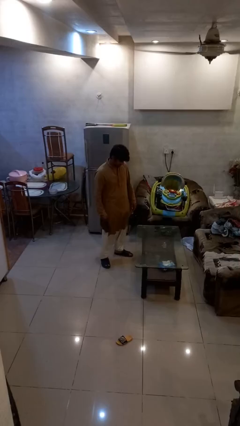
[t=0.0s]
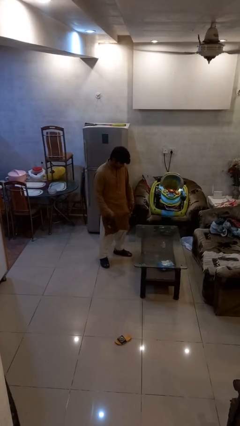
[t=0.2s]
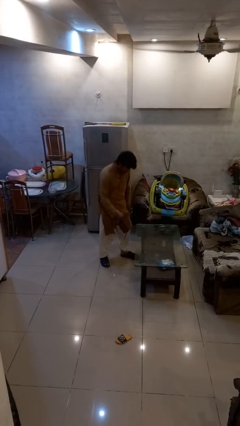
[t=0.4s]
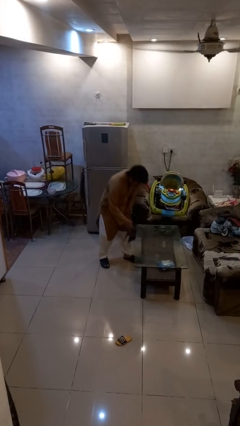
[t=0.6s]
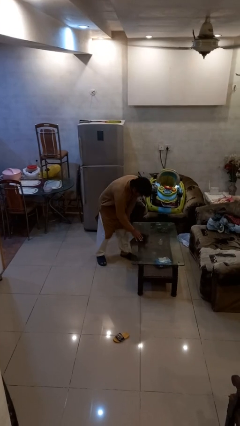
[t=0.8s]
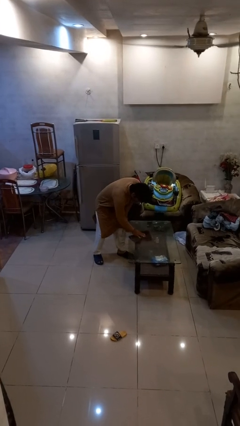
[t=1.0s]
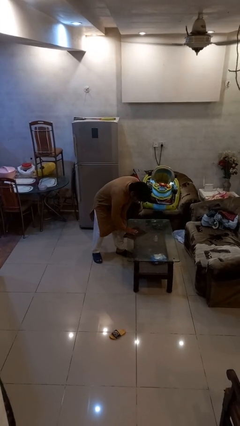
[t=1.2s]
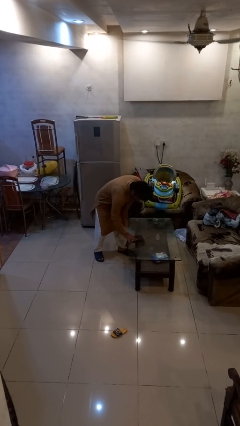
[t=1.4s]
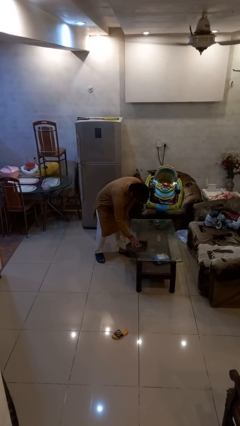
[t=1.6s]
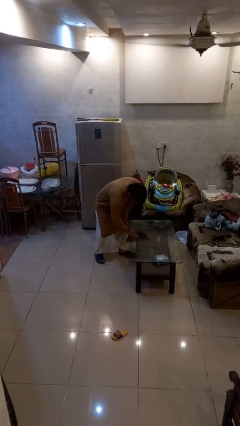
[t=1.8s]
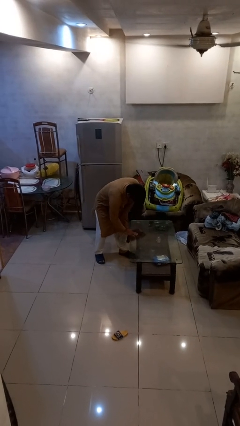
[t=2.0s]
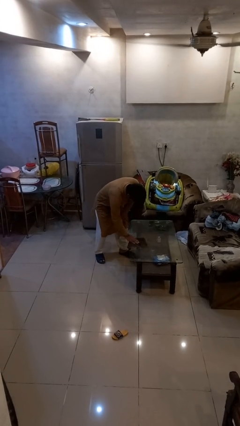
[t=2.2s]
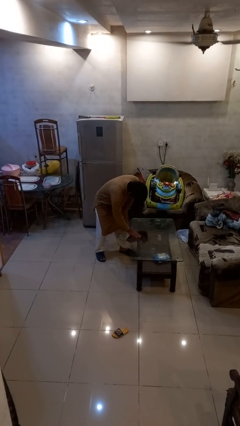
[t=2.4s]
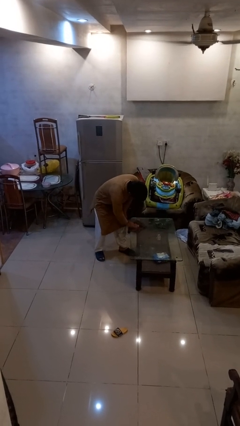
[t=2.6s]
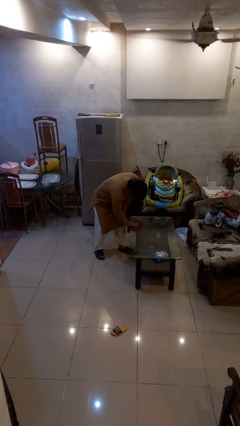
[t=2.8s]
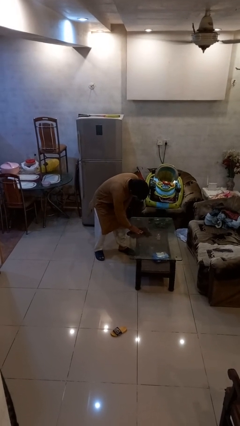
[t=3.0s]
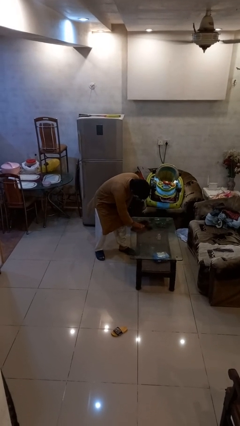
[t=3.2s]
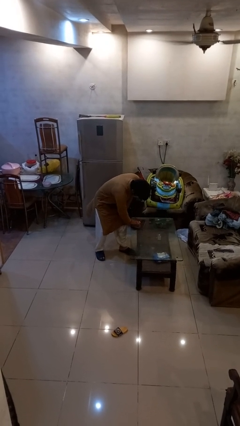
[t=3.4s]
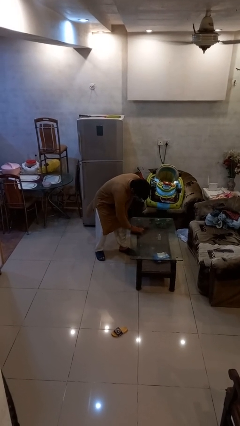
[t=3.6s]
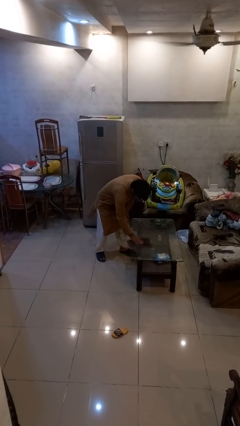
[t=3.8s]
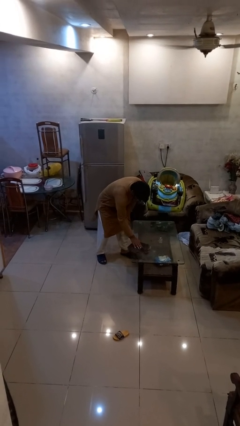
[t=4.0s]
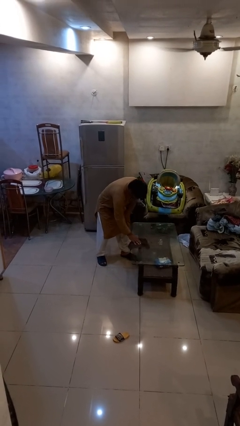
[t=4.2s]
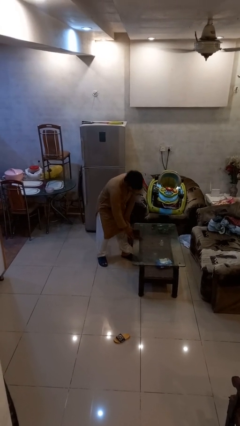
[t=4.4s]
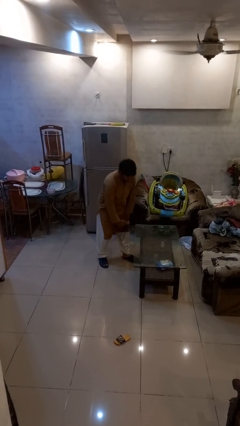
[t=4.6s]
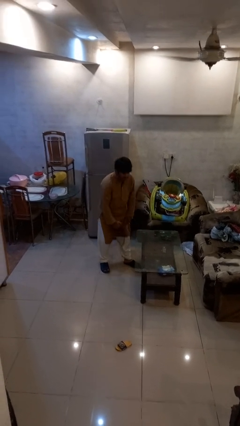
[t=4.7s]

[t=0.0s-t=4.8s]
person cleans table with rag

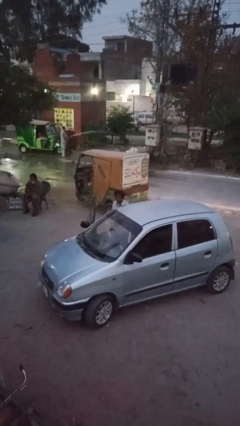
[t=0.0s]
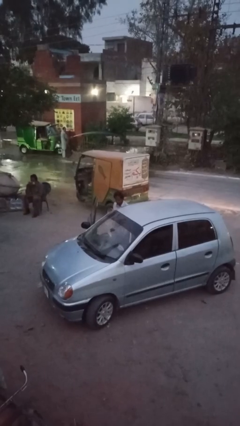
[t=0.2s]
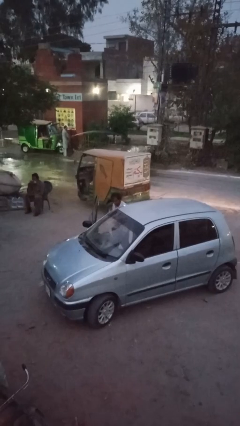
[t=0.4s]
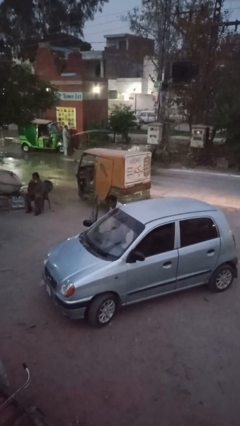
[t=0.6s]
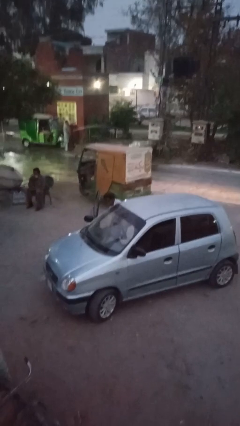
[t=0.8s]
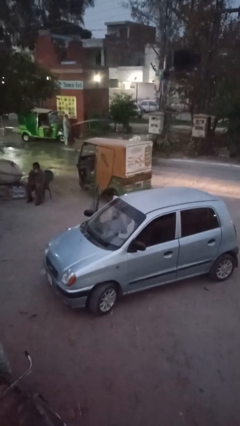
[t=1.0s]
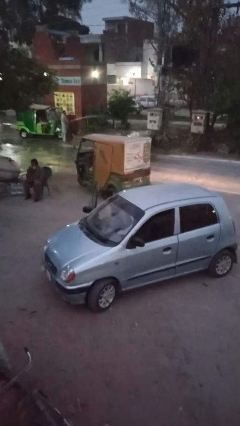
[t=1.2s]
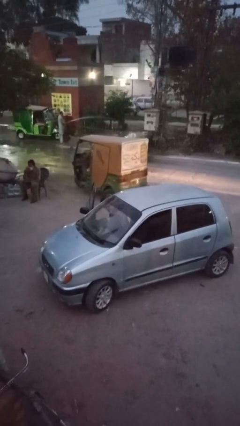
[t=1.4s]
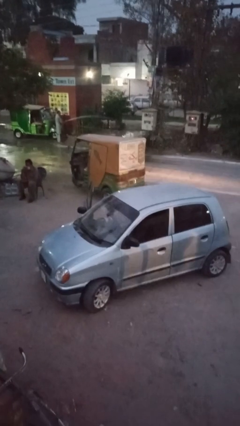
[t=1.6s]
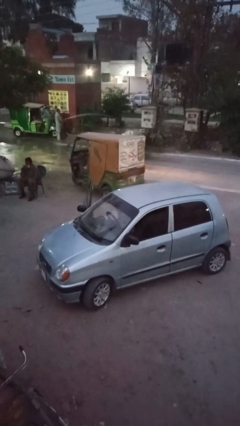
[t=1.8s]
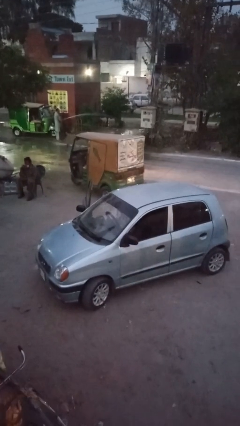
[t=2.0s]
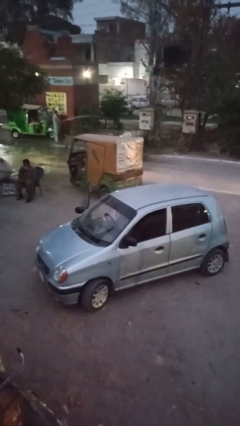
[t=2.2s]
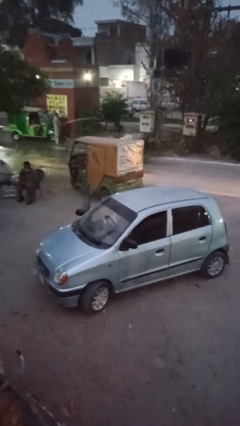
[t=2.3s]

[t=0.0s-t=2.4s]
person enters car

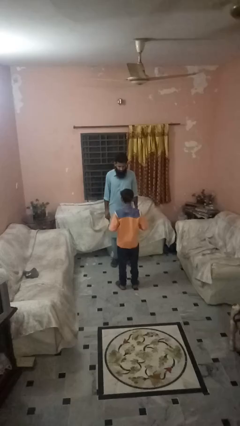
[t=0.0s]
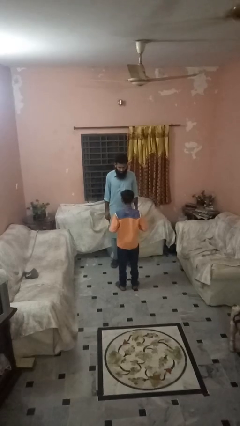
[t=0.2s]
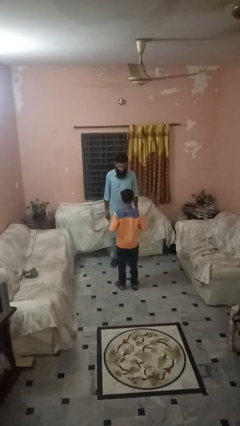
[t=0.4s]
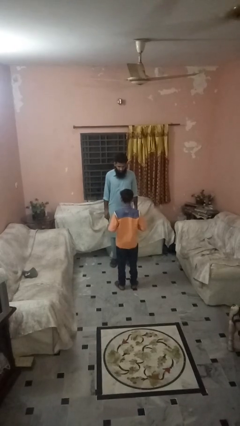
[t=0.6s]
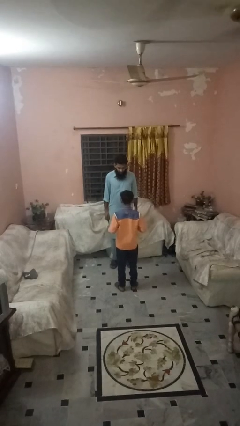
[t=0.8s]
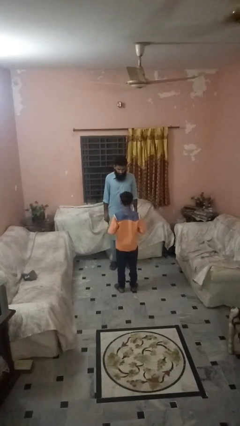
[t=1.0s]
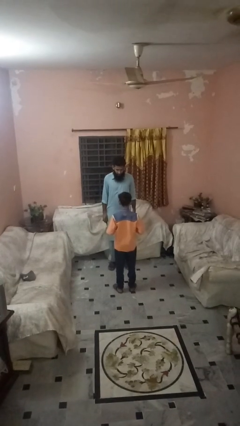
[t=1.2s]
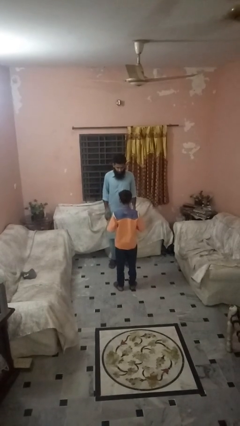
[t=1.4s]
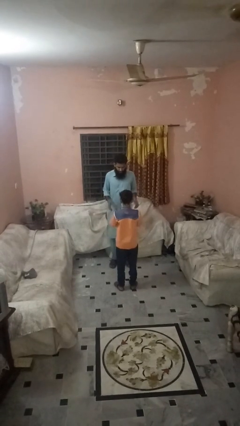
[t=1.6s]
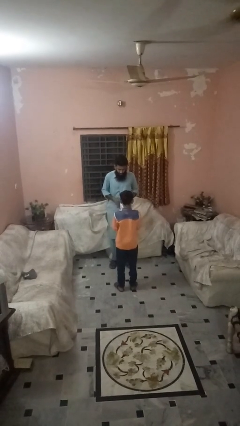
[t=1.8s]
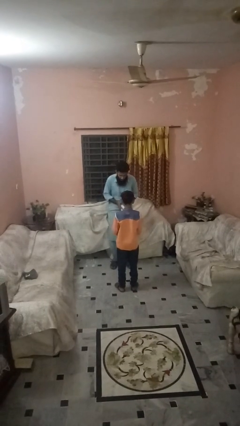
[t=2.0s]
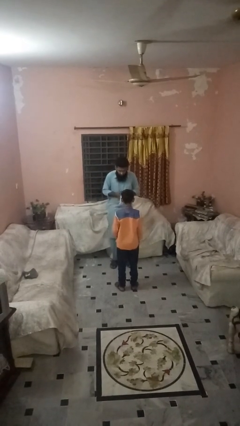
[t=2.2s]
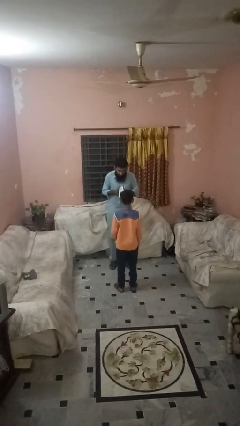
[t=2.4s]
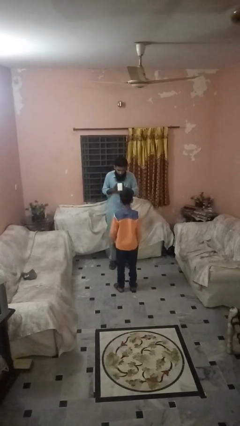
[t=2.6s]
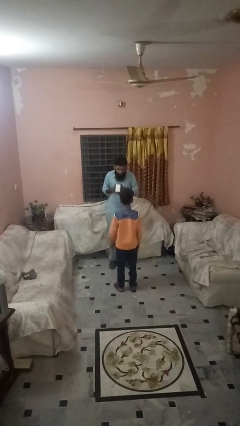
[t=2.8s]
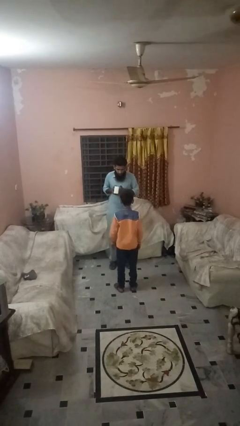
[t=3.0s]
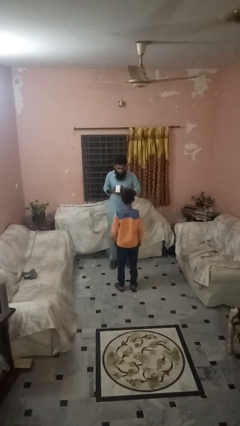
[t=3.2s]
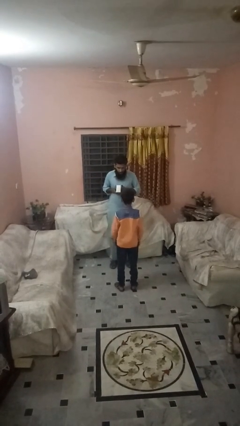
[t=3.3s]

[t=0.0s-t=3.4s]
person catches object from person

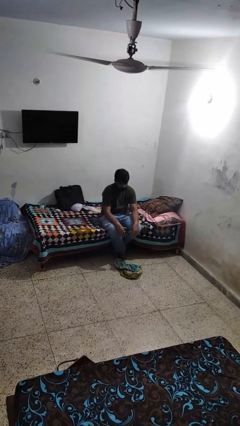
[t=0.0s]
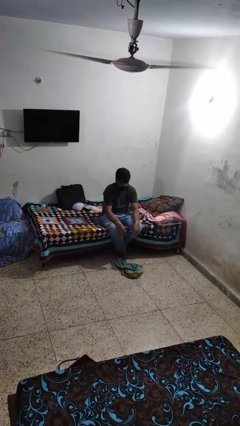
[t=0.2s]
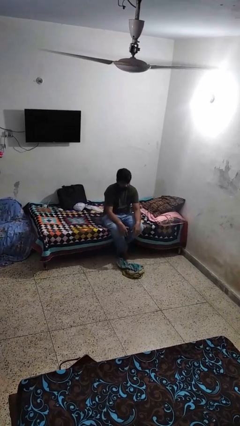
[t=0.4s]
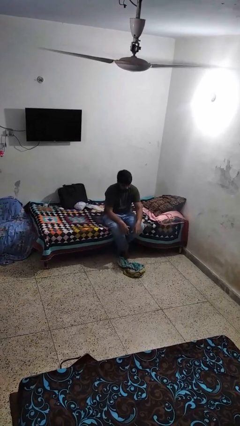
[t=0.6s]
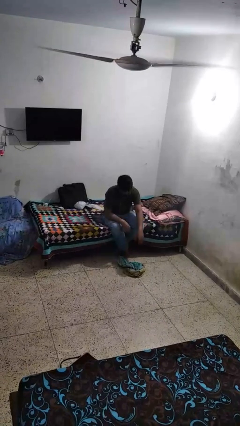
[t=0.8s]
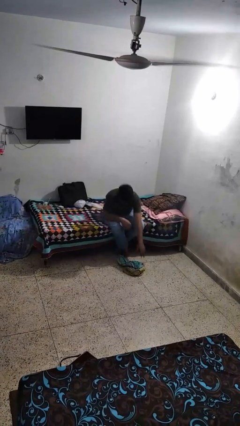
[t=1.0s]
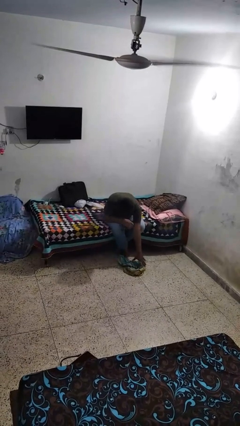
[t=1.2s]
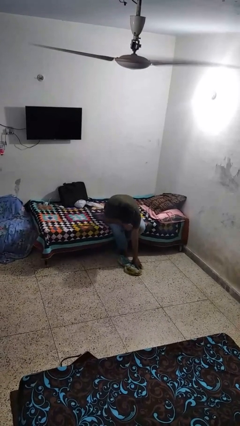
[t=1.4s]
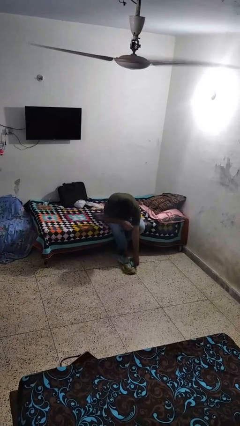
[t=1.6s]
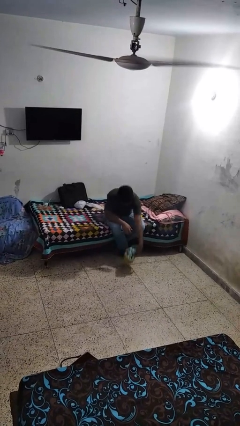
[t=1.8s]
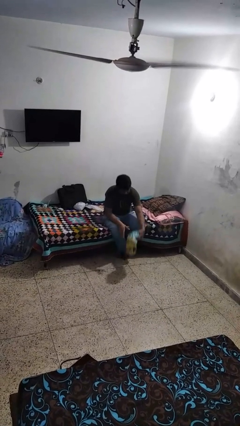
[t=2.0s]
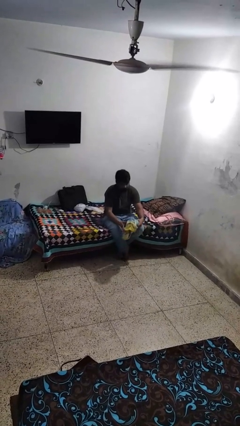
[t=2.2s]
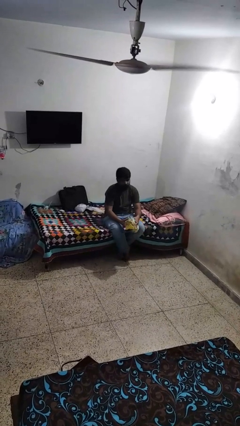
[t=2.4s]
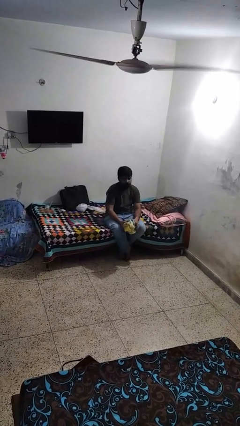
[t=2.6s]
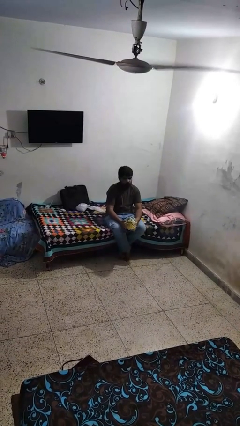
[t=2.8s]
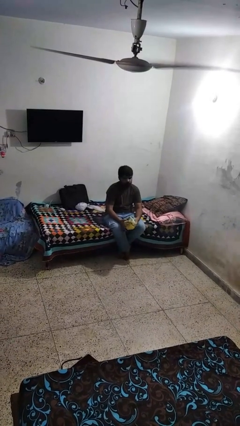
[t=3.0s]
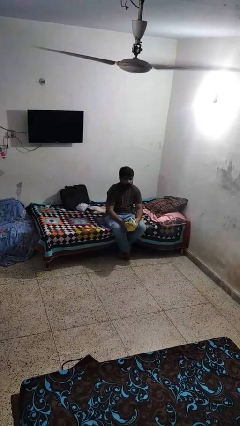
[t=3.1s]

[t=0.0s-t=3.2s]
person picks up object from floor

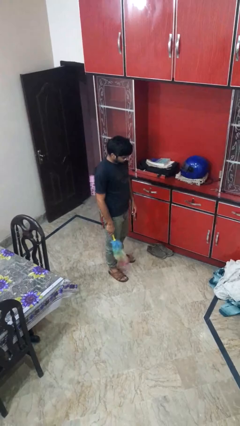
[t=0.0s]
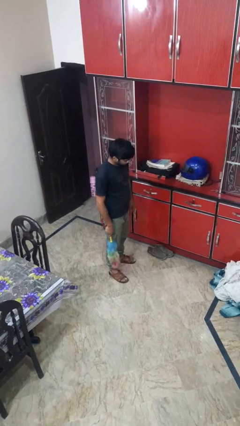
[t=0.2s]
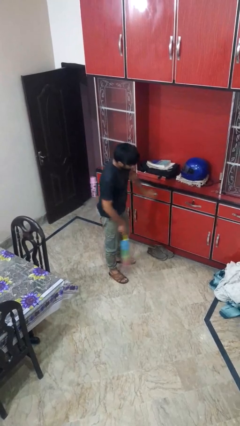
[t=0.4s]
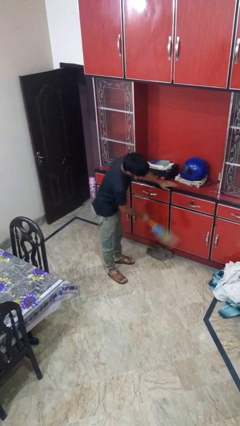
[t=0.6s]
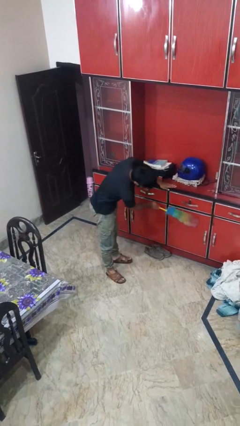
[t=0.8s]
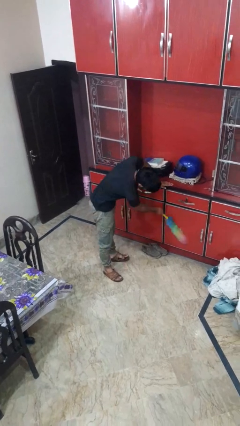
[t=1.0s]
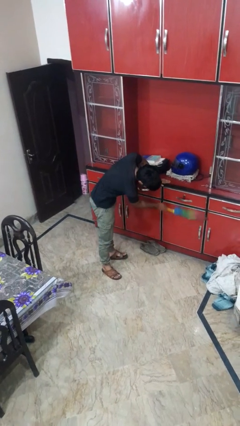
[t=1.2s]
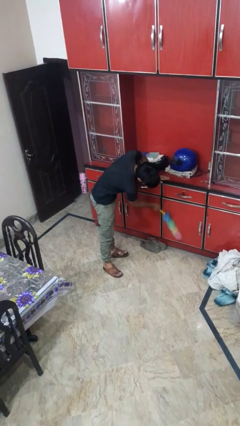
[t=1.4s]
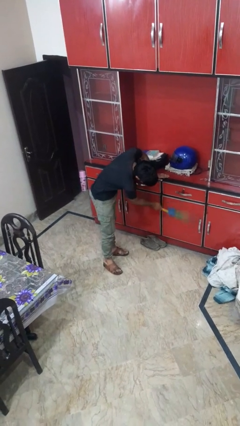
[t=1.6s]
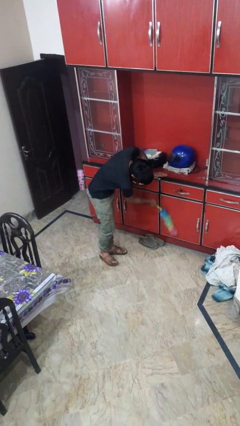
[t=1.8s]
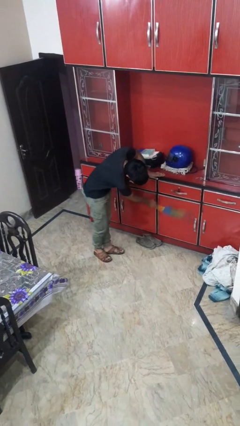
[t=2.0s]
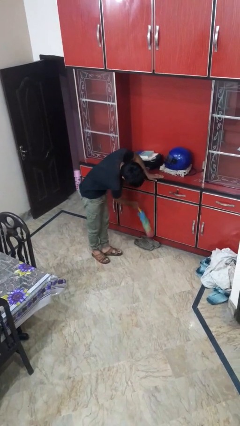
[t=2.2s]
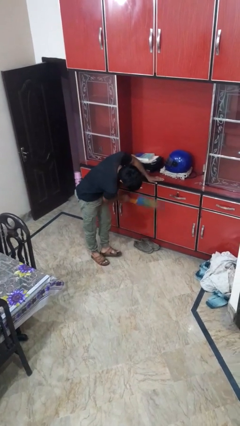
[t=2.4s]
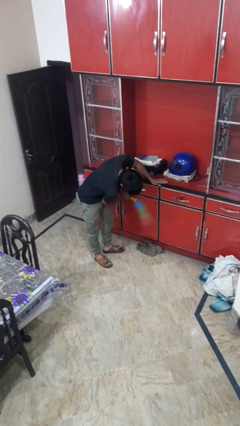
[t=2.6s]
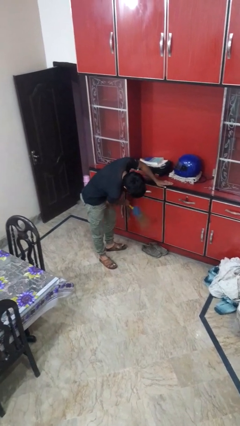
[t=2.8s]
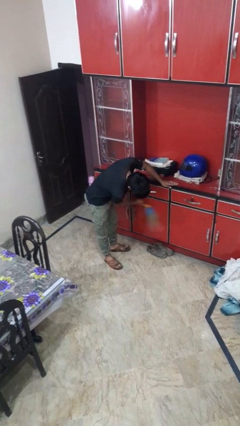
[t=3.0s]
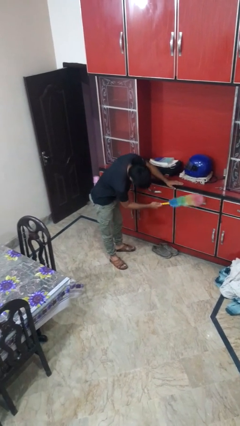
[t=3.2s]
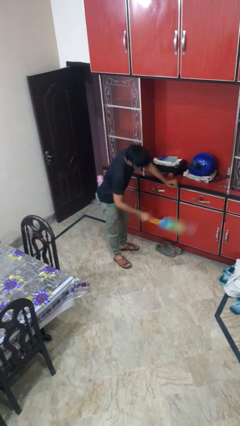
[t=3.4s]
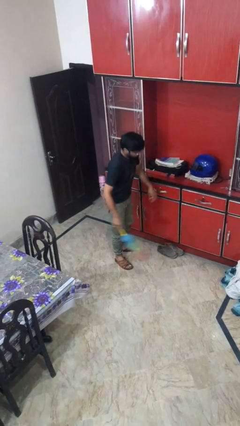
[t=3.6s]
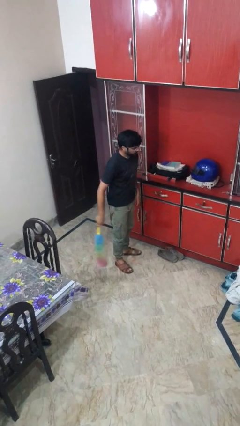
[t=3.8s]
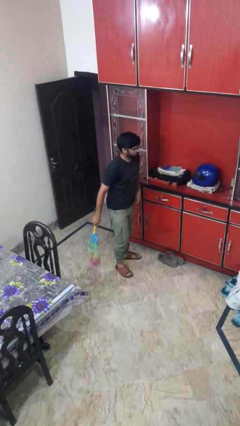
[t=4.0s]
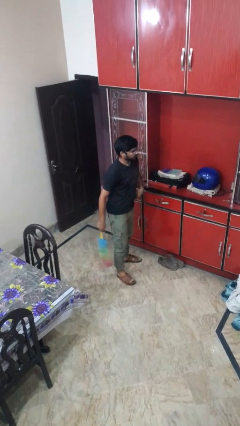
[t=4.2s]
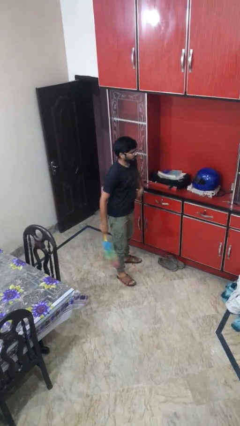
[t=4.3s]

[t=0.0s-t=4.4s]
person dusts furniture
